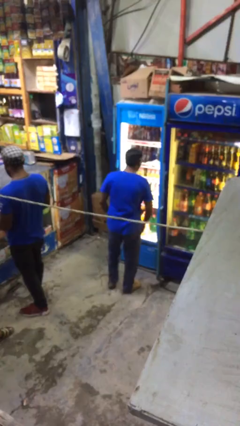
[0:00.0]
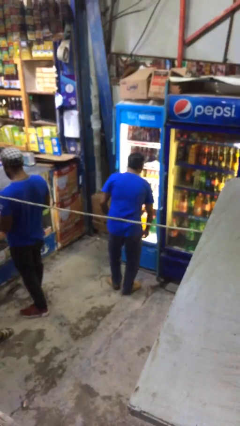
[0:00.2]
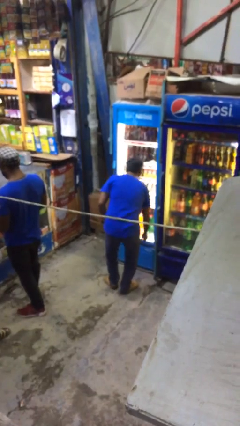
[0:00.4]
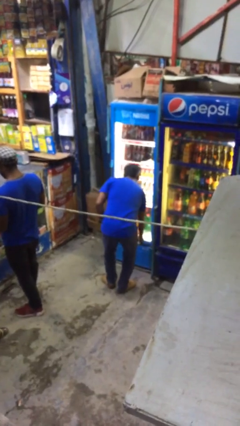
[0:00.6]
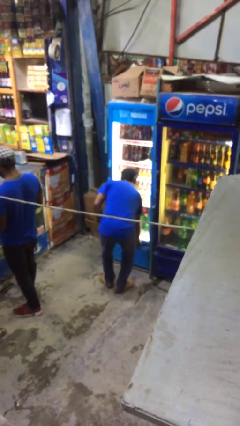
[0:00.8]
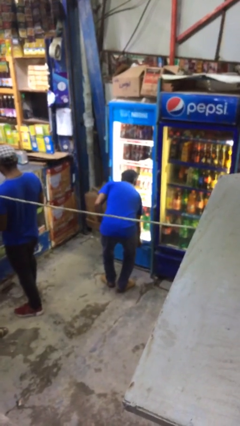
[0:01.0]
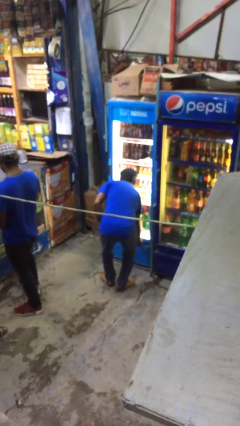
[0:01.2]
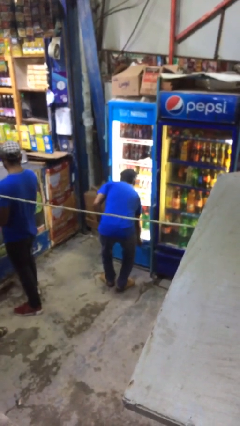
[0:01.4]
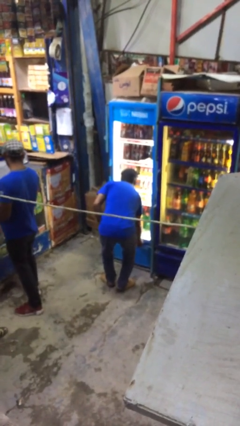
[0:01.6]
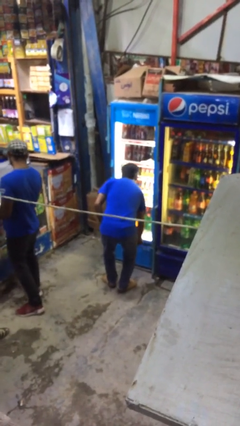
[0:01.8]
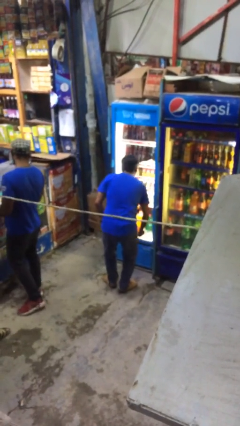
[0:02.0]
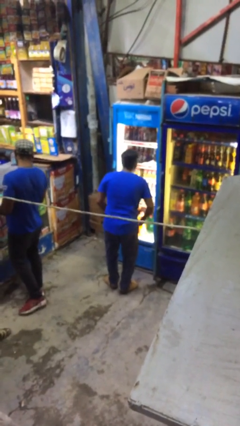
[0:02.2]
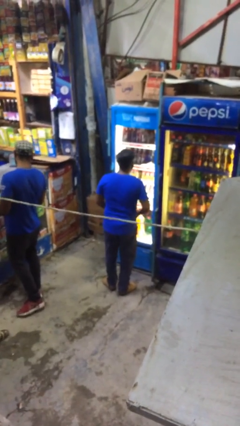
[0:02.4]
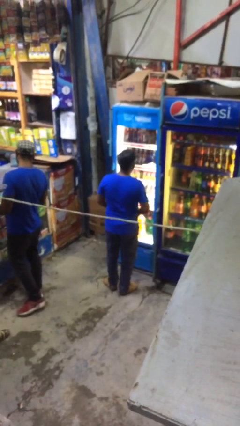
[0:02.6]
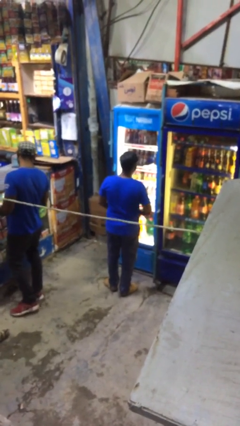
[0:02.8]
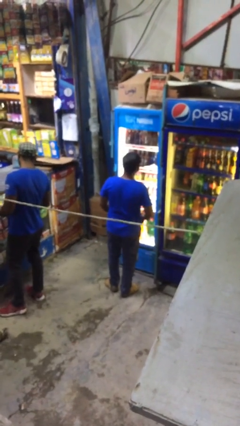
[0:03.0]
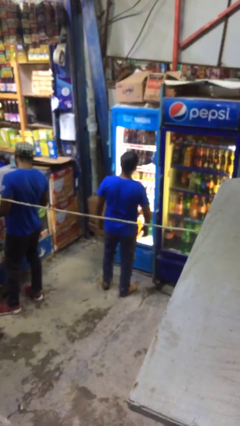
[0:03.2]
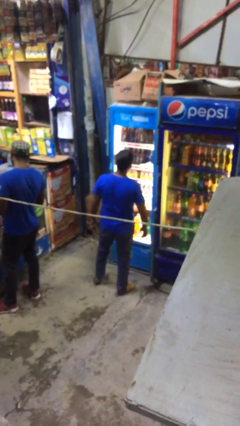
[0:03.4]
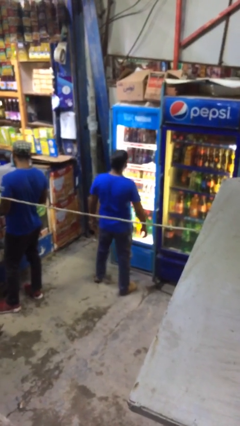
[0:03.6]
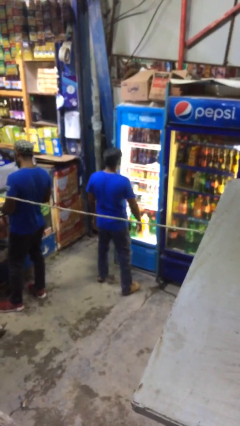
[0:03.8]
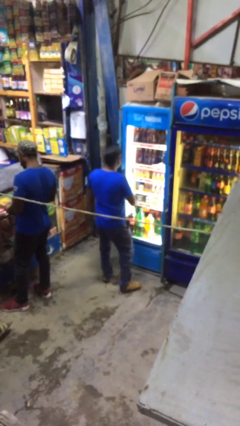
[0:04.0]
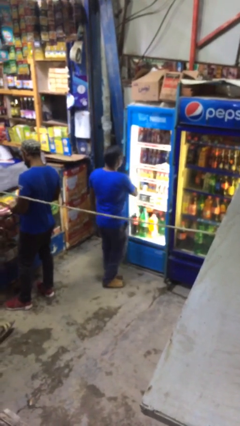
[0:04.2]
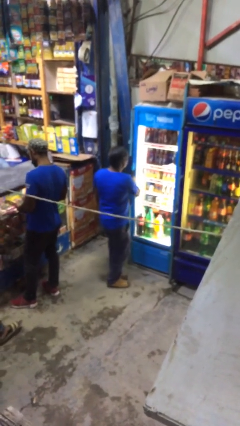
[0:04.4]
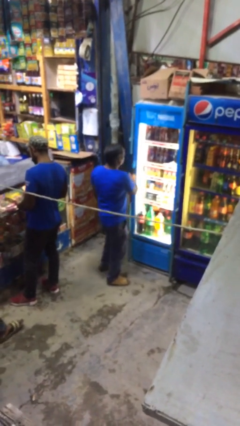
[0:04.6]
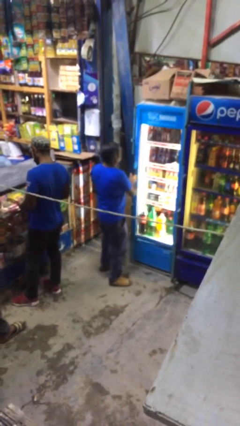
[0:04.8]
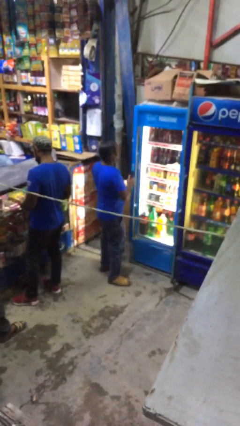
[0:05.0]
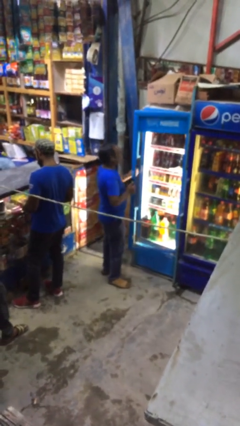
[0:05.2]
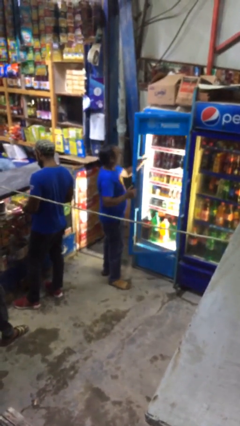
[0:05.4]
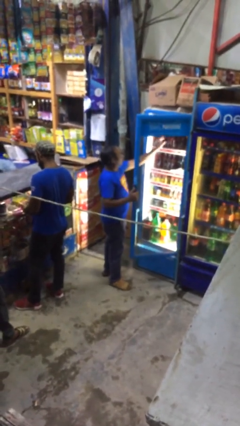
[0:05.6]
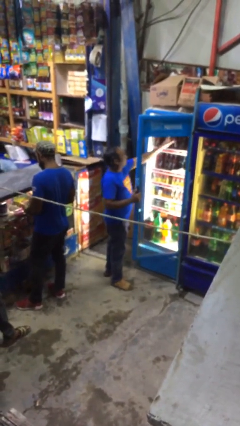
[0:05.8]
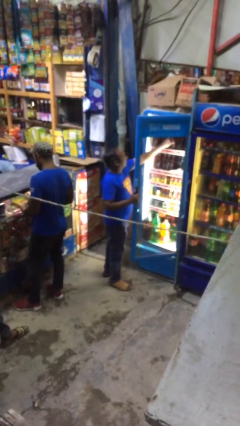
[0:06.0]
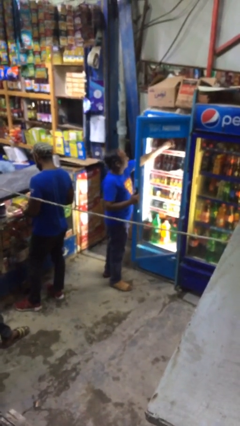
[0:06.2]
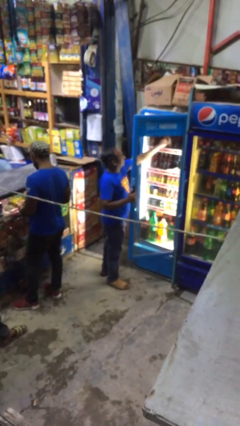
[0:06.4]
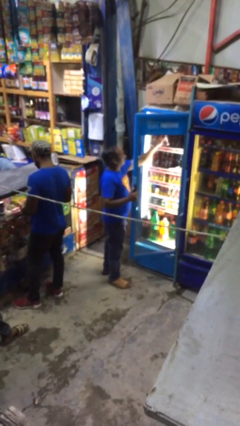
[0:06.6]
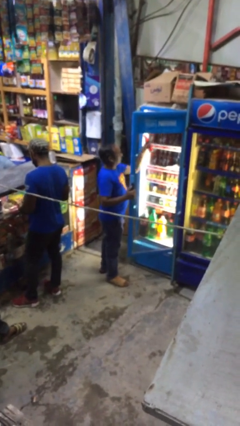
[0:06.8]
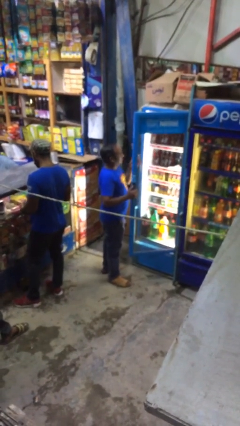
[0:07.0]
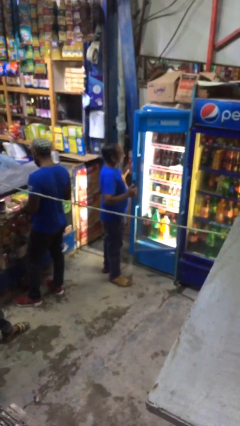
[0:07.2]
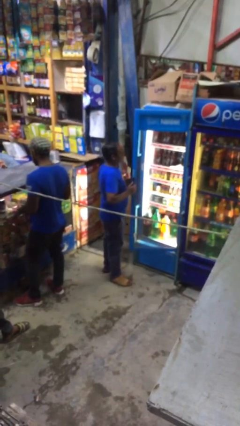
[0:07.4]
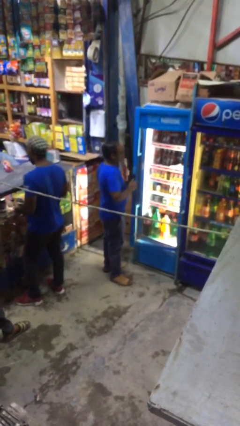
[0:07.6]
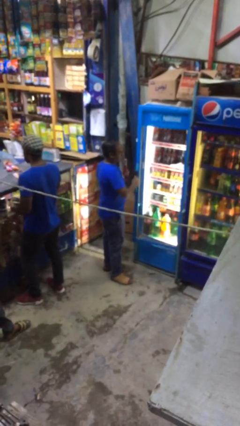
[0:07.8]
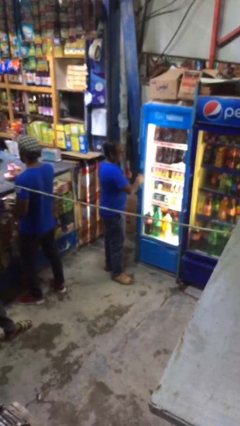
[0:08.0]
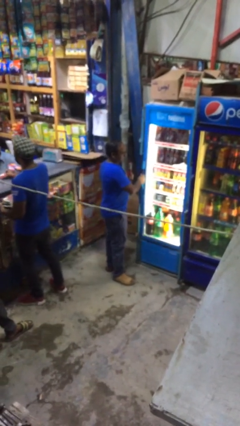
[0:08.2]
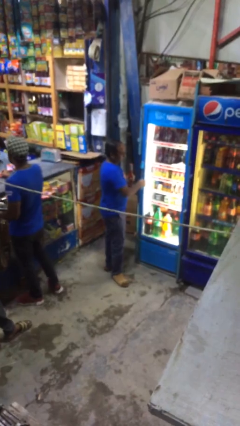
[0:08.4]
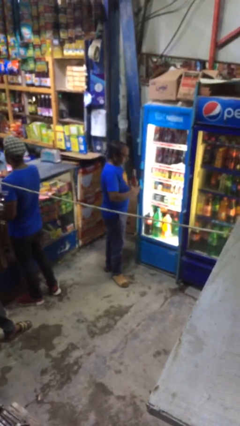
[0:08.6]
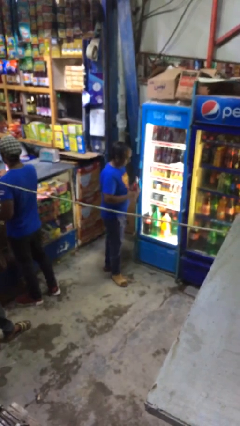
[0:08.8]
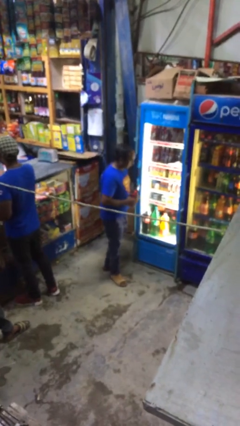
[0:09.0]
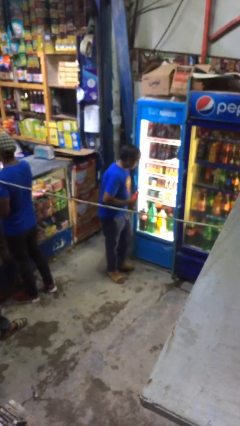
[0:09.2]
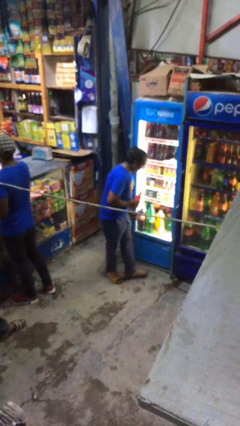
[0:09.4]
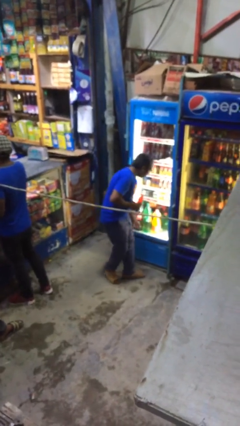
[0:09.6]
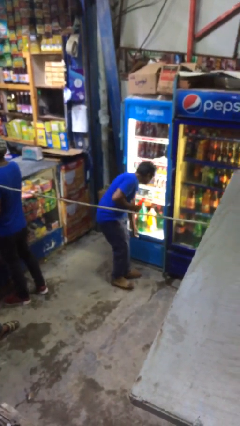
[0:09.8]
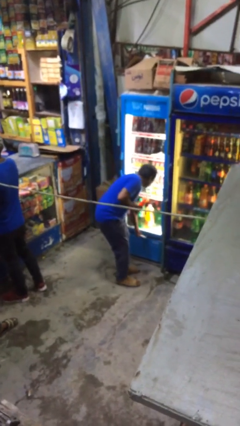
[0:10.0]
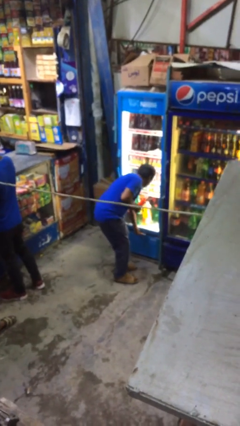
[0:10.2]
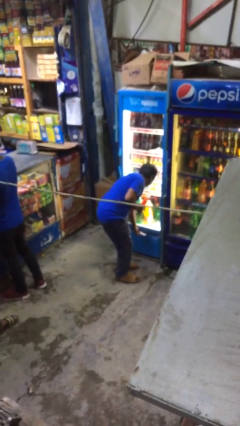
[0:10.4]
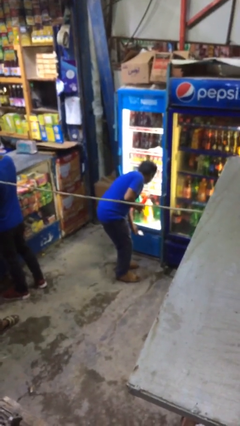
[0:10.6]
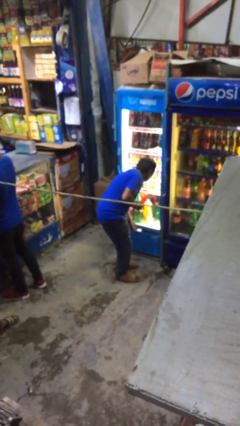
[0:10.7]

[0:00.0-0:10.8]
person purchases from machine

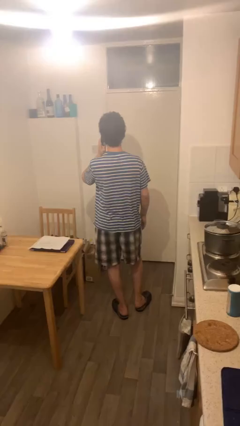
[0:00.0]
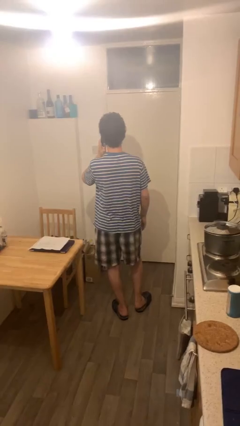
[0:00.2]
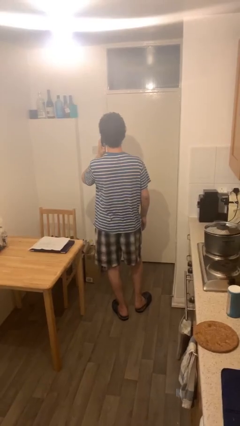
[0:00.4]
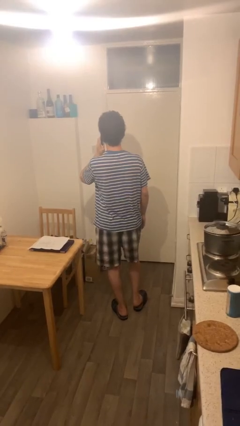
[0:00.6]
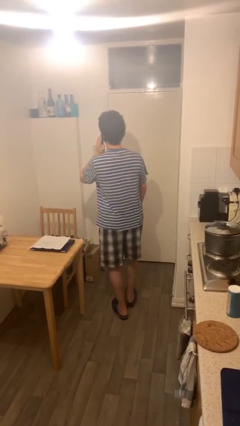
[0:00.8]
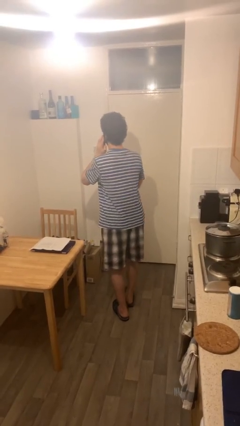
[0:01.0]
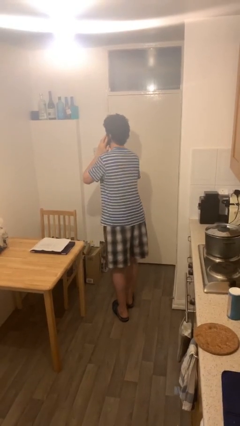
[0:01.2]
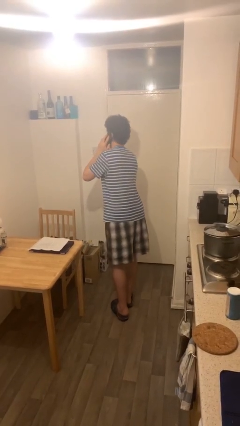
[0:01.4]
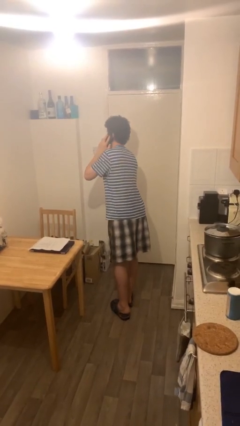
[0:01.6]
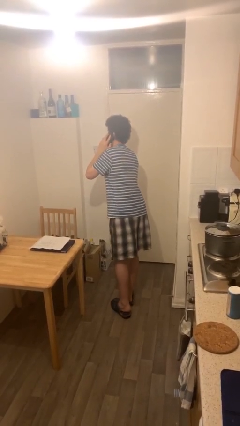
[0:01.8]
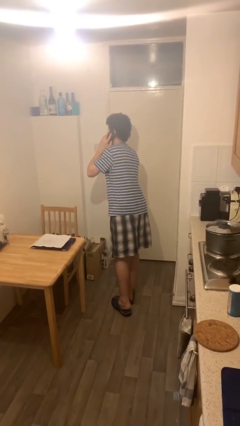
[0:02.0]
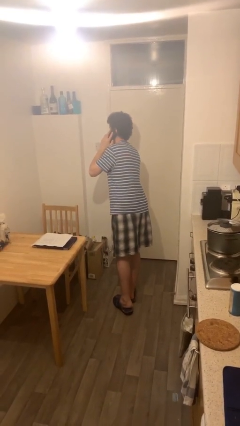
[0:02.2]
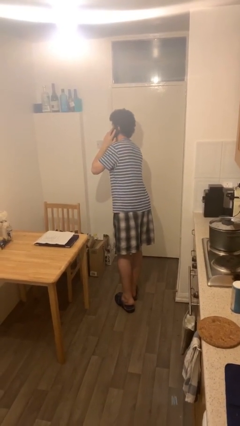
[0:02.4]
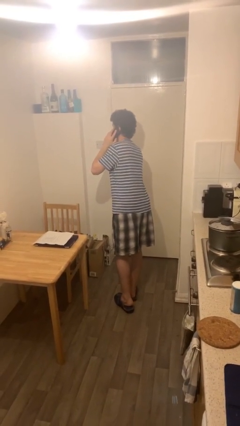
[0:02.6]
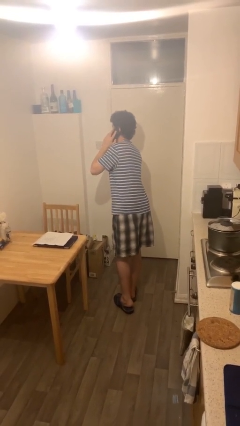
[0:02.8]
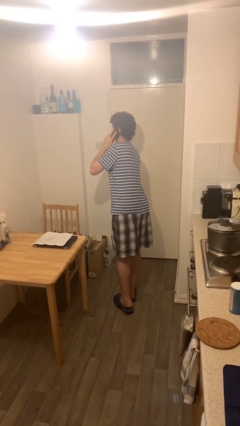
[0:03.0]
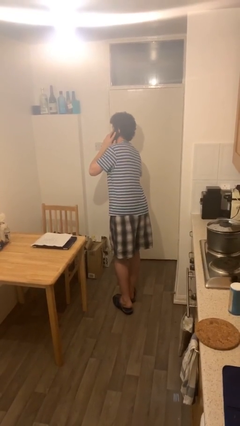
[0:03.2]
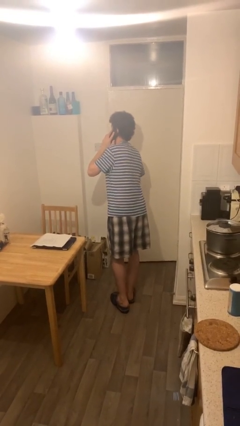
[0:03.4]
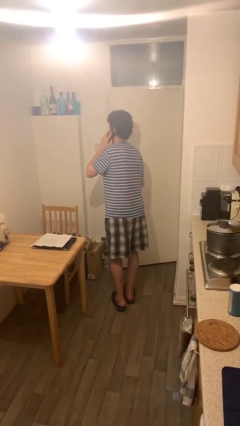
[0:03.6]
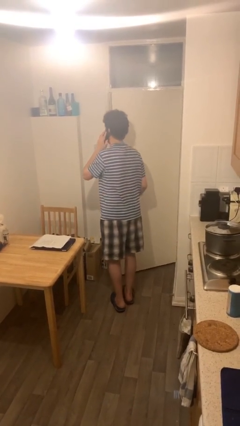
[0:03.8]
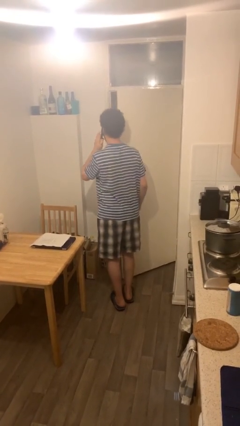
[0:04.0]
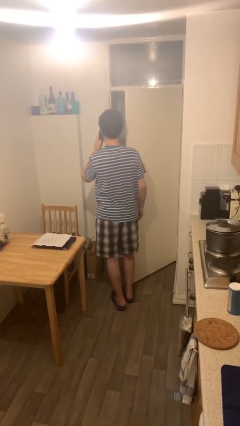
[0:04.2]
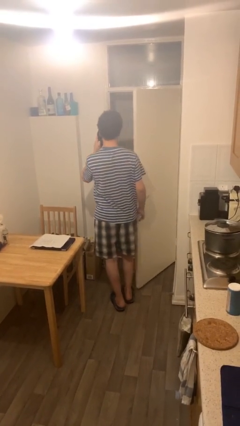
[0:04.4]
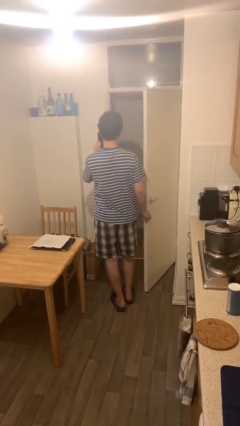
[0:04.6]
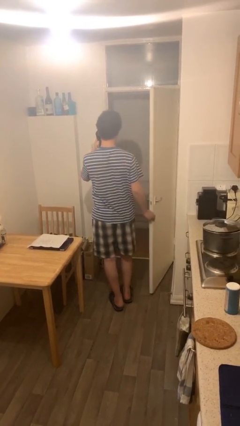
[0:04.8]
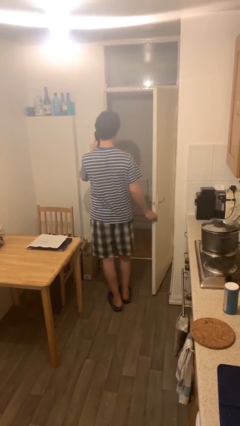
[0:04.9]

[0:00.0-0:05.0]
person opens facility door

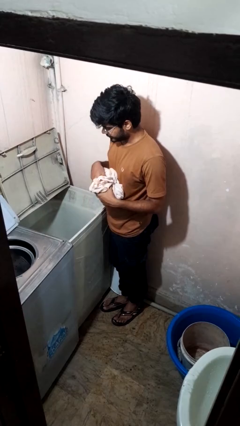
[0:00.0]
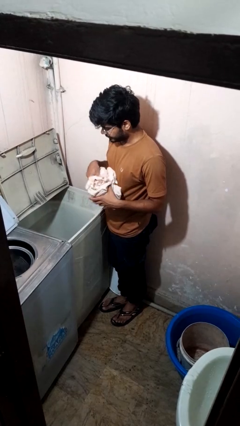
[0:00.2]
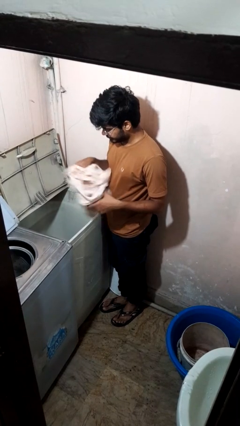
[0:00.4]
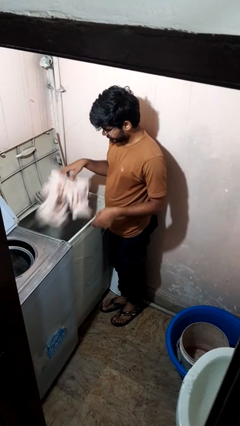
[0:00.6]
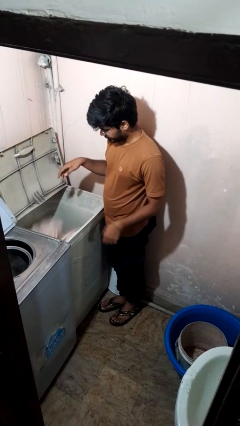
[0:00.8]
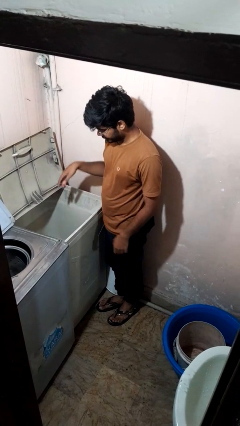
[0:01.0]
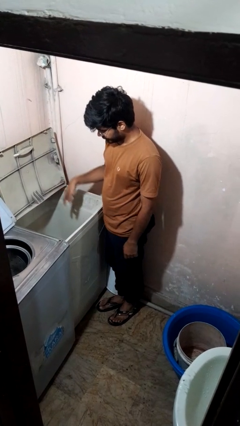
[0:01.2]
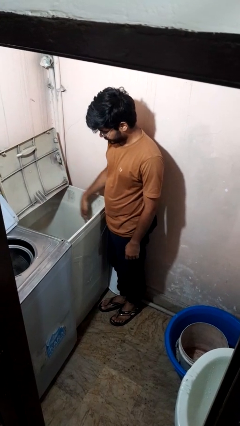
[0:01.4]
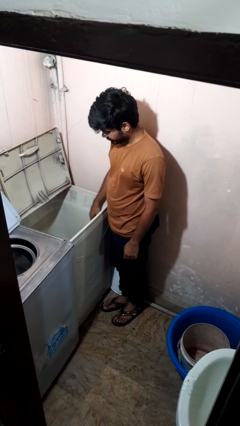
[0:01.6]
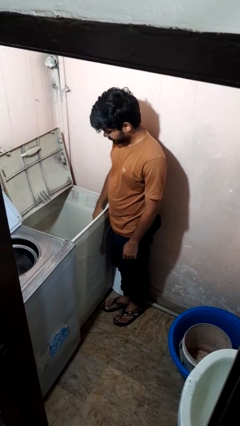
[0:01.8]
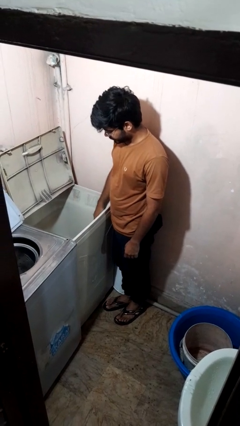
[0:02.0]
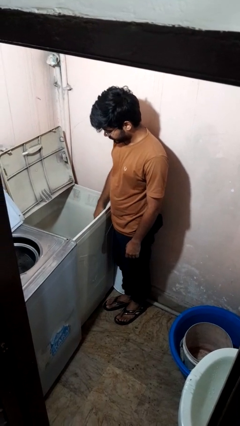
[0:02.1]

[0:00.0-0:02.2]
person loads clotheswasher

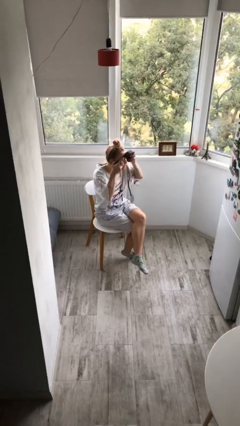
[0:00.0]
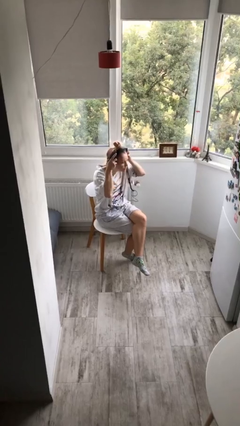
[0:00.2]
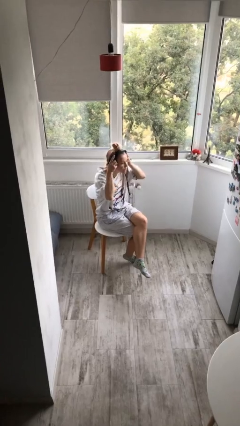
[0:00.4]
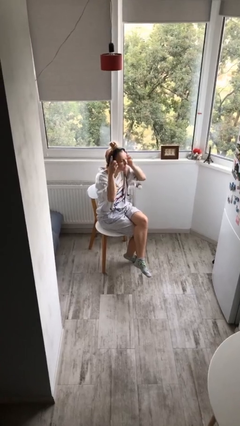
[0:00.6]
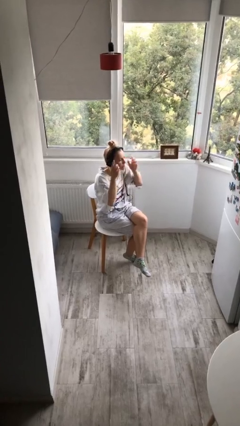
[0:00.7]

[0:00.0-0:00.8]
person puts on headphones
